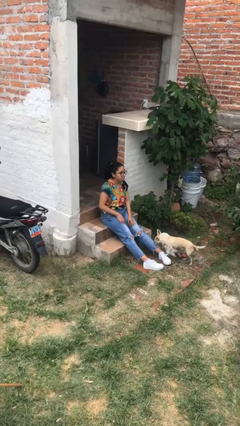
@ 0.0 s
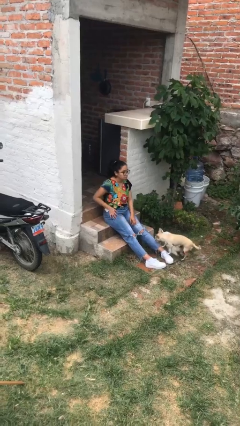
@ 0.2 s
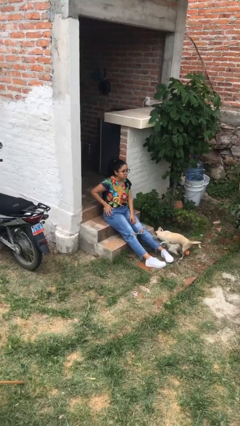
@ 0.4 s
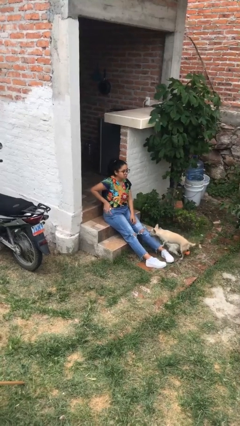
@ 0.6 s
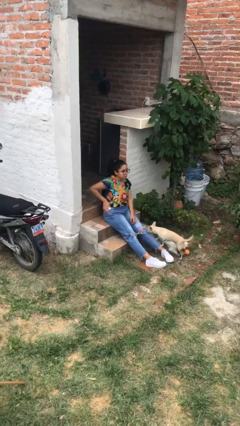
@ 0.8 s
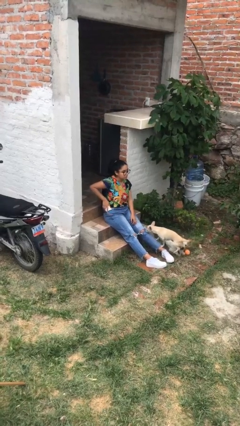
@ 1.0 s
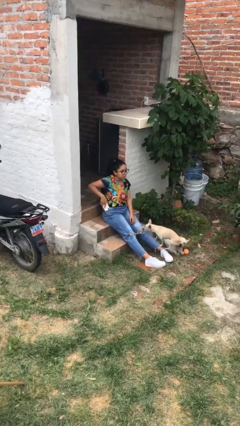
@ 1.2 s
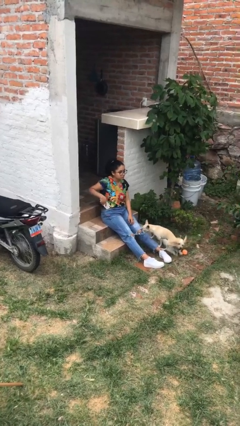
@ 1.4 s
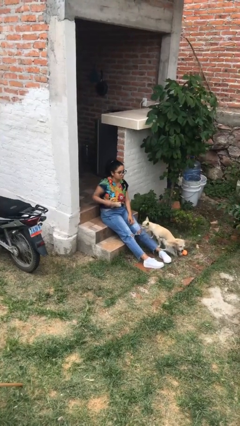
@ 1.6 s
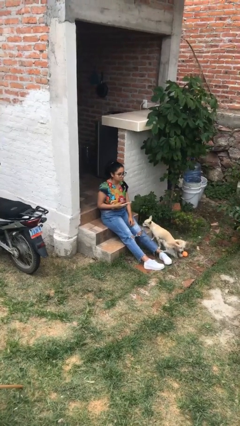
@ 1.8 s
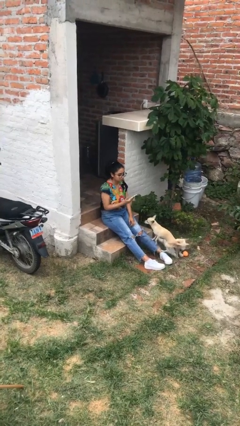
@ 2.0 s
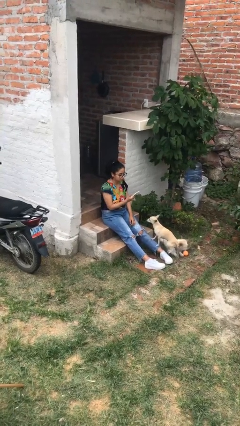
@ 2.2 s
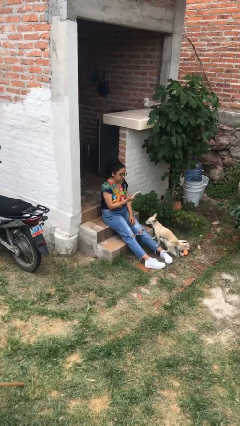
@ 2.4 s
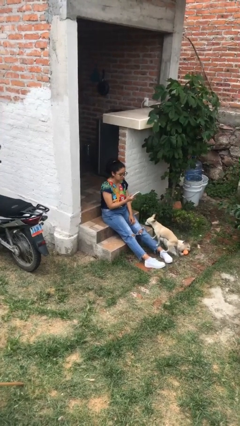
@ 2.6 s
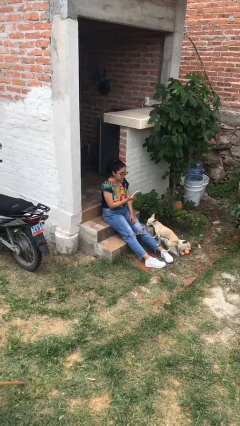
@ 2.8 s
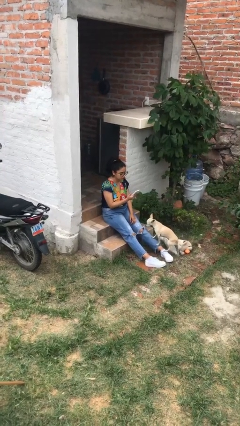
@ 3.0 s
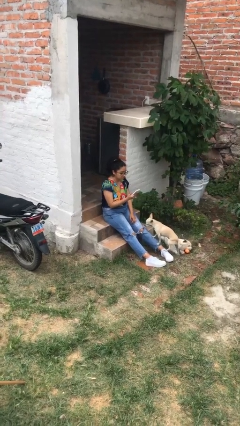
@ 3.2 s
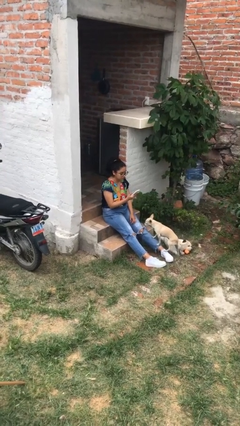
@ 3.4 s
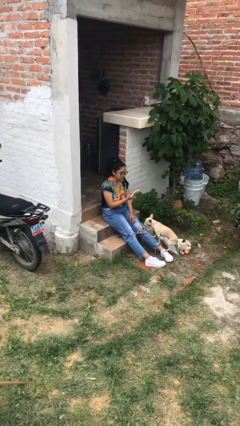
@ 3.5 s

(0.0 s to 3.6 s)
person takes phone from pocket

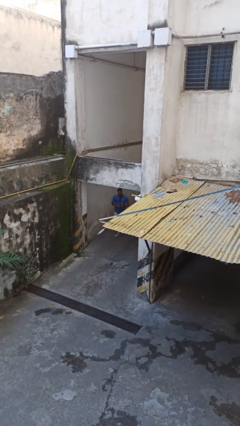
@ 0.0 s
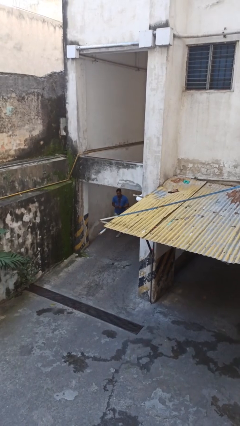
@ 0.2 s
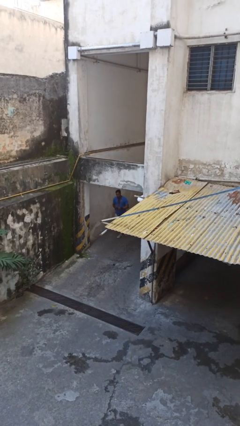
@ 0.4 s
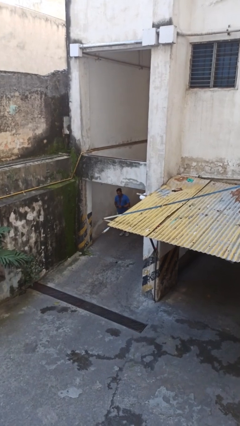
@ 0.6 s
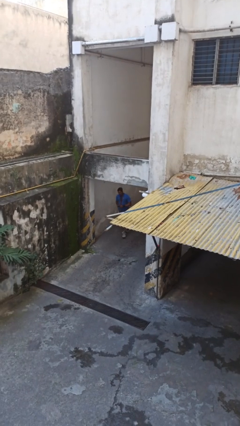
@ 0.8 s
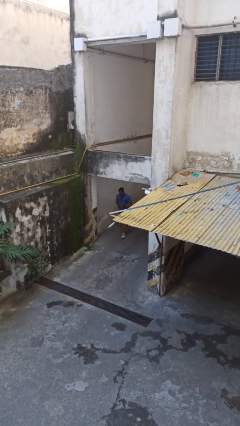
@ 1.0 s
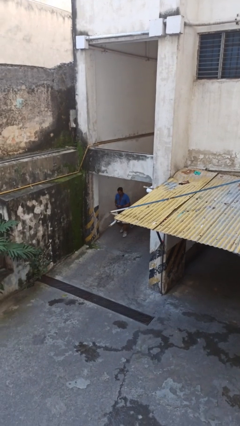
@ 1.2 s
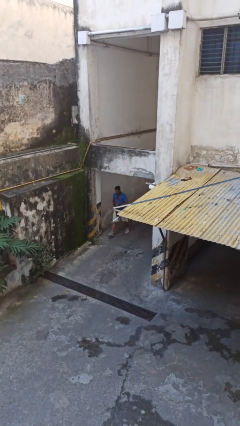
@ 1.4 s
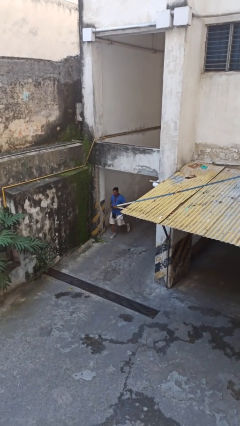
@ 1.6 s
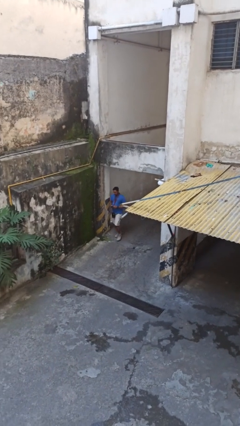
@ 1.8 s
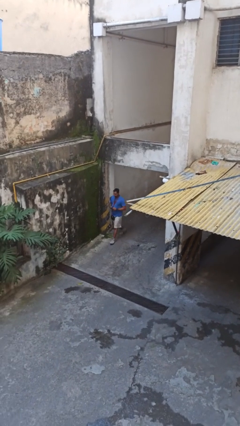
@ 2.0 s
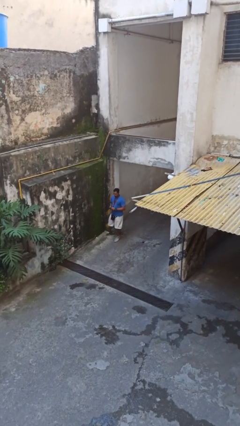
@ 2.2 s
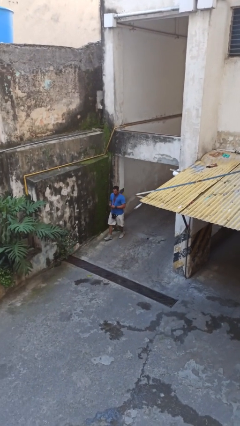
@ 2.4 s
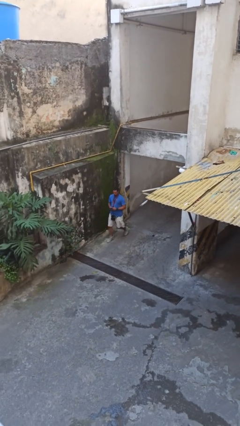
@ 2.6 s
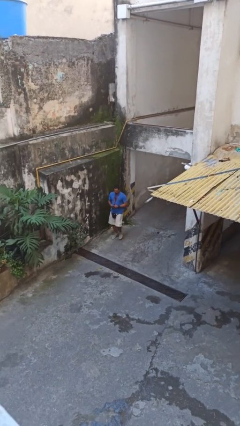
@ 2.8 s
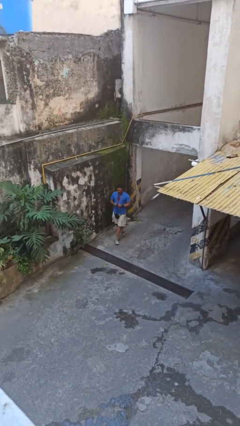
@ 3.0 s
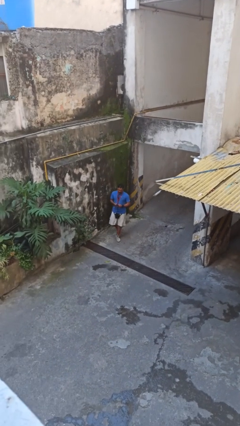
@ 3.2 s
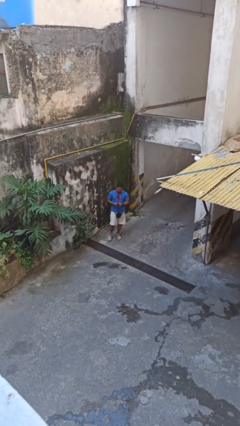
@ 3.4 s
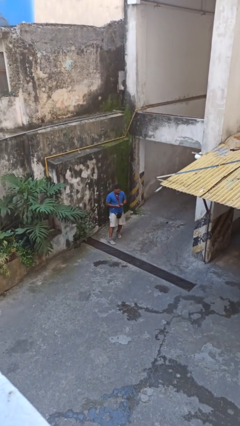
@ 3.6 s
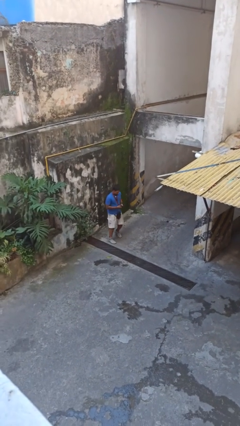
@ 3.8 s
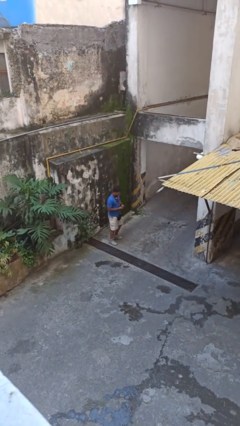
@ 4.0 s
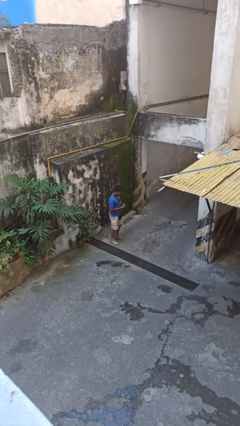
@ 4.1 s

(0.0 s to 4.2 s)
person enters scene through structure

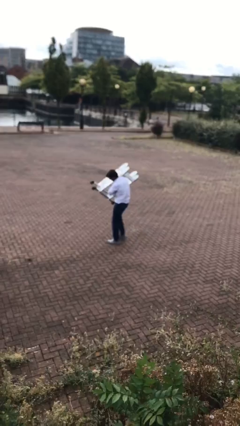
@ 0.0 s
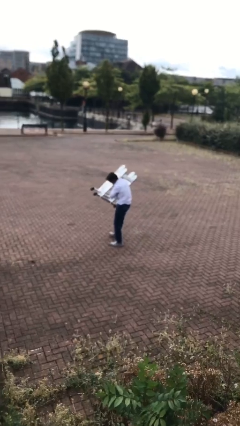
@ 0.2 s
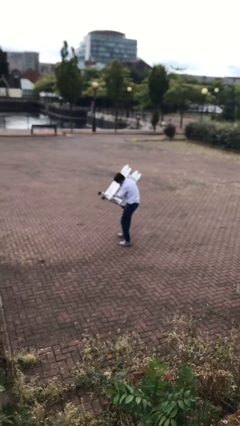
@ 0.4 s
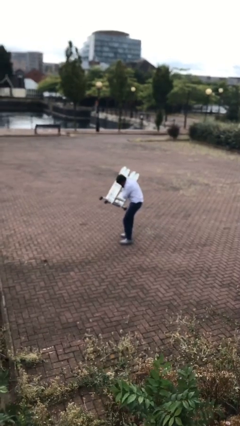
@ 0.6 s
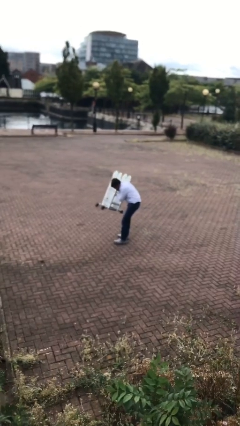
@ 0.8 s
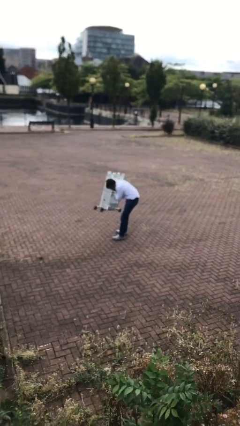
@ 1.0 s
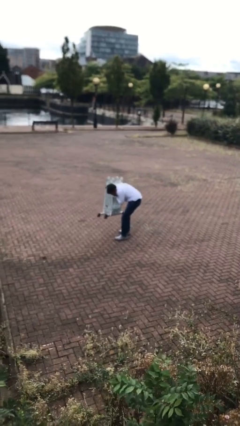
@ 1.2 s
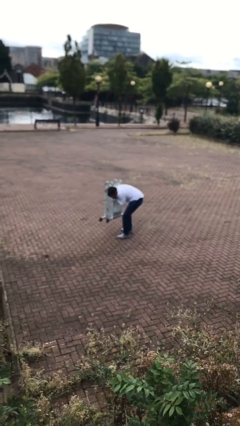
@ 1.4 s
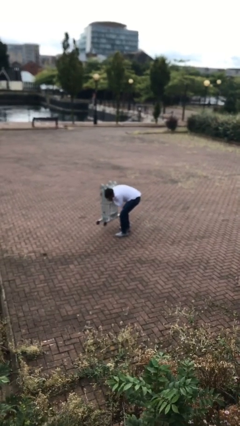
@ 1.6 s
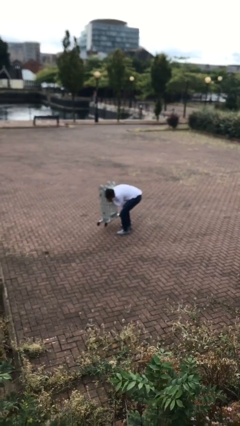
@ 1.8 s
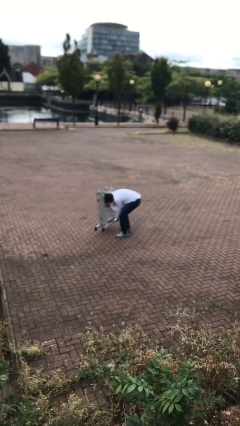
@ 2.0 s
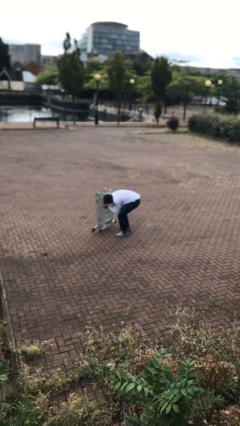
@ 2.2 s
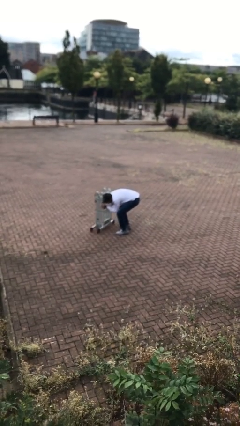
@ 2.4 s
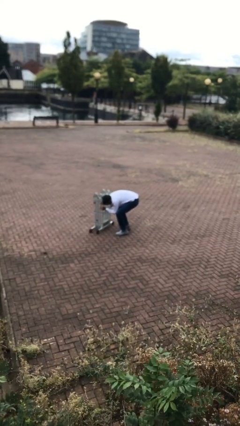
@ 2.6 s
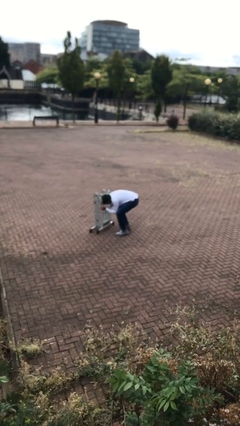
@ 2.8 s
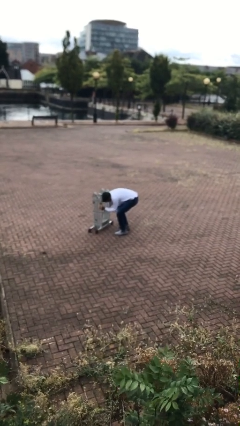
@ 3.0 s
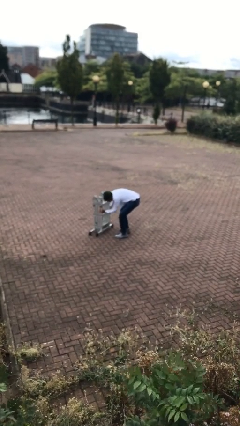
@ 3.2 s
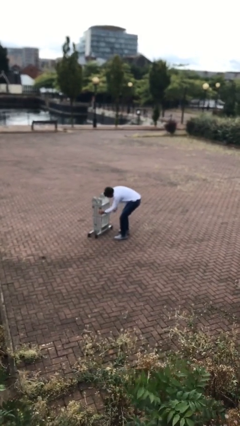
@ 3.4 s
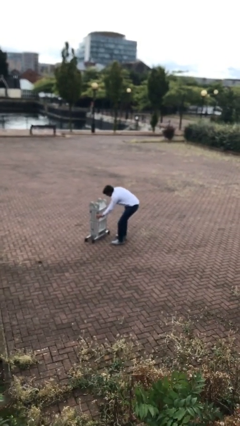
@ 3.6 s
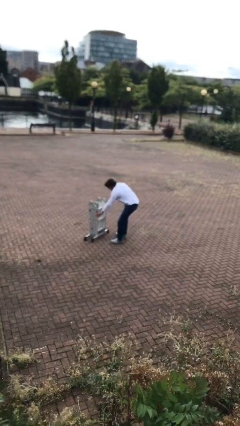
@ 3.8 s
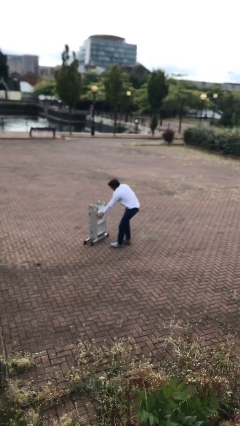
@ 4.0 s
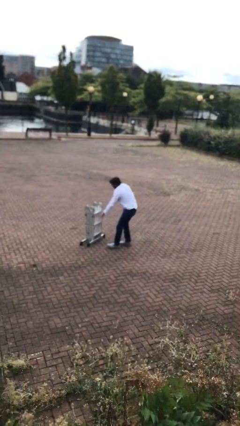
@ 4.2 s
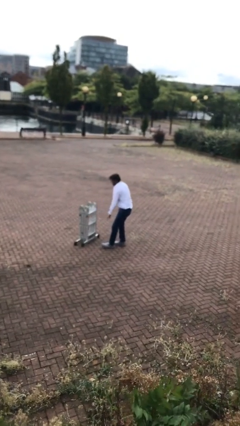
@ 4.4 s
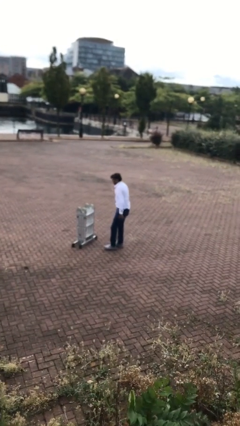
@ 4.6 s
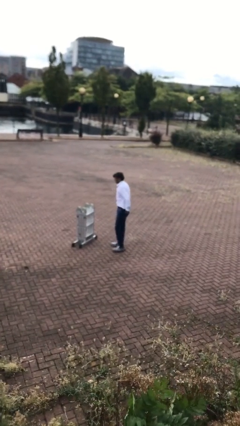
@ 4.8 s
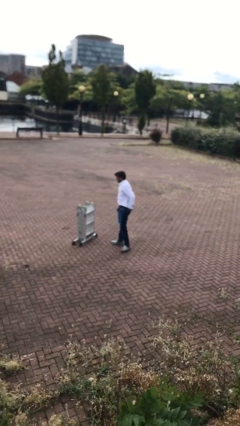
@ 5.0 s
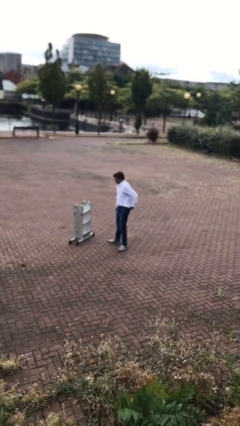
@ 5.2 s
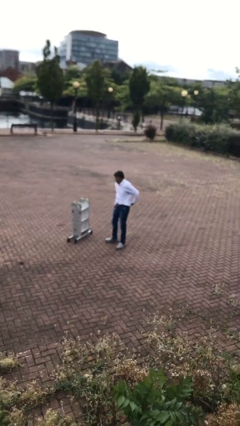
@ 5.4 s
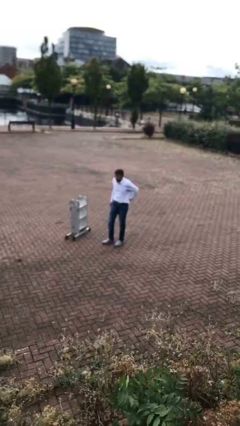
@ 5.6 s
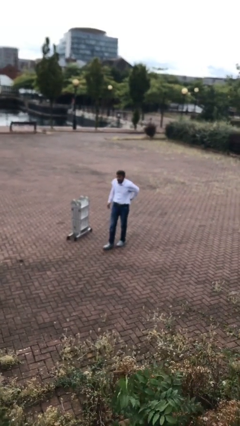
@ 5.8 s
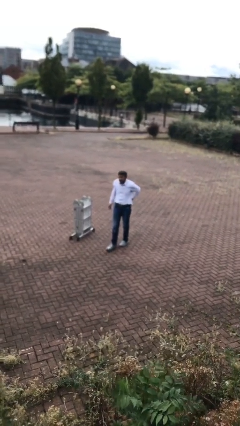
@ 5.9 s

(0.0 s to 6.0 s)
person puts down object on floor

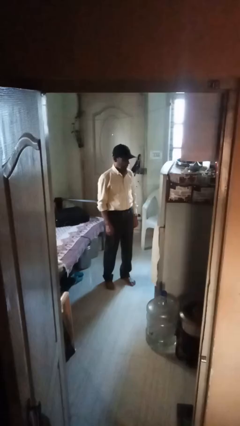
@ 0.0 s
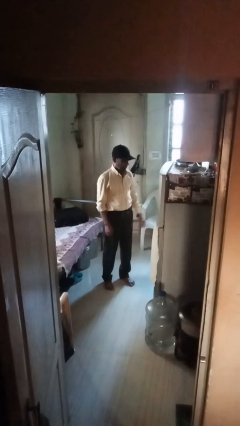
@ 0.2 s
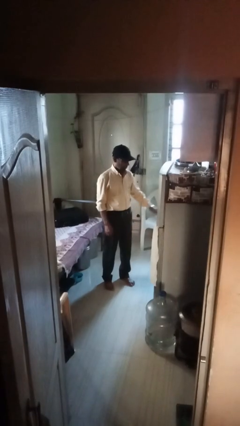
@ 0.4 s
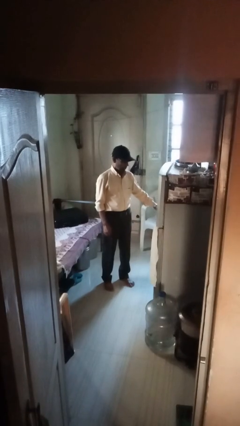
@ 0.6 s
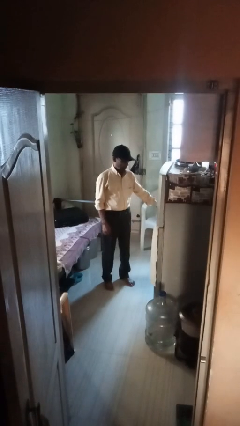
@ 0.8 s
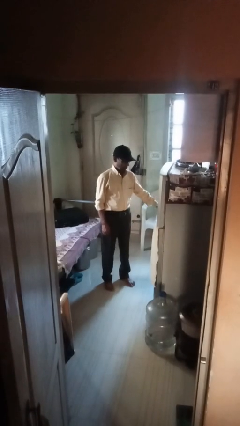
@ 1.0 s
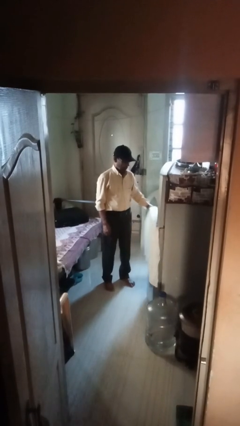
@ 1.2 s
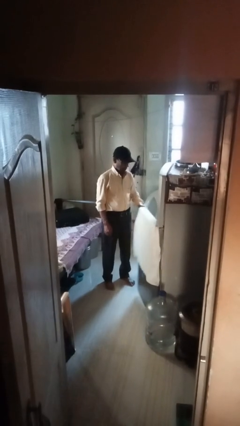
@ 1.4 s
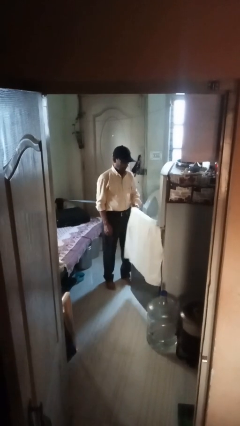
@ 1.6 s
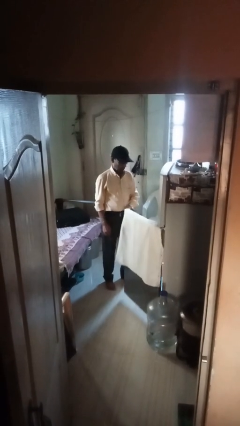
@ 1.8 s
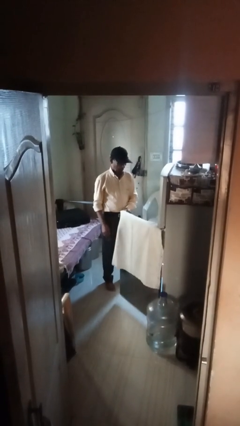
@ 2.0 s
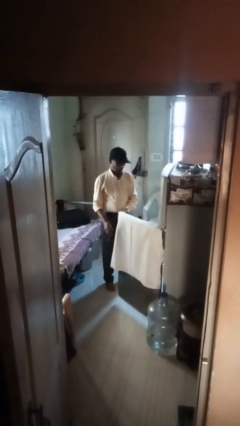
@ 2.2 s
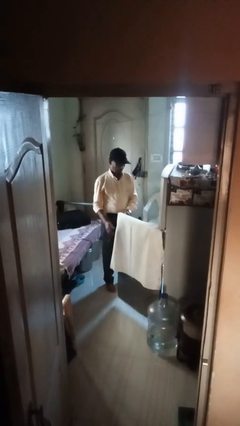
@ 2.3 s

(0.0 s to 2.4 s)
person opens clothes washer

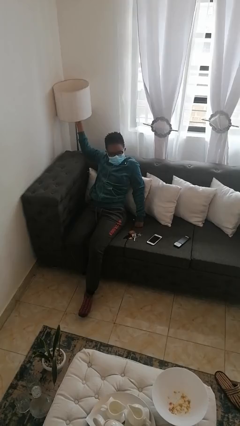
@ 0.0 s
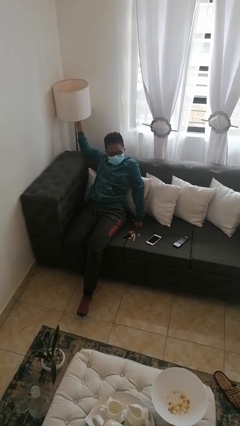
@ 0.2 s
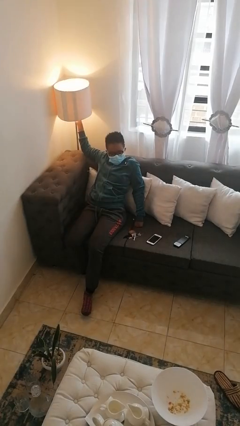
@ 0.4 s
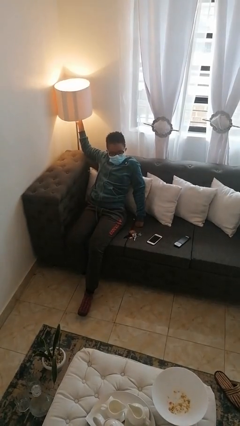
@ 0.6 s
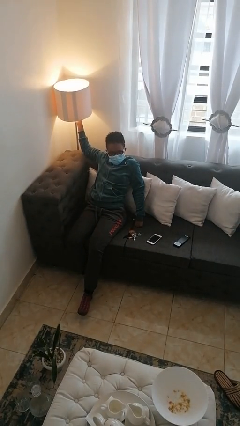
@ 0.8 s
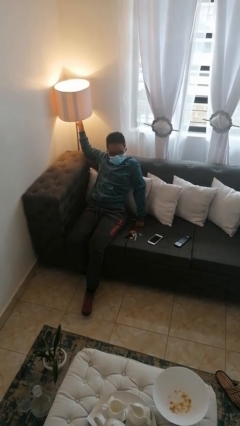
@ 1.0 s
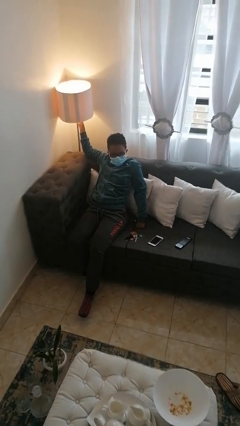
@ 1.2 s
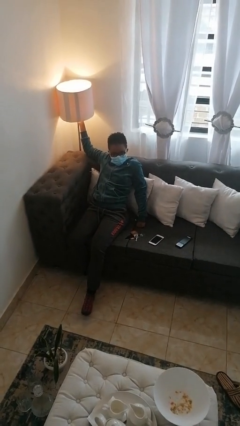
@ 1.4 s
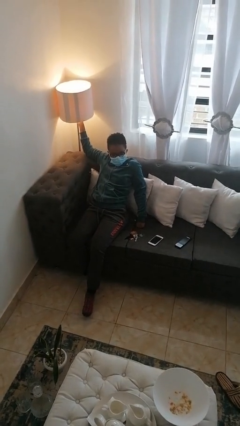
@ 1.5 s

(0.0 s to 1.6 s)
person turns on lamp
